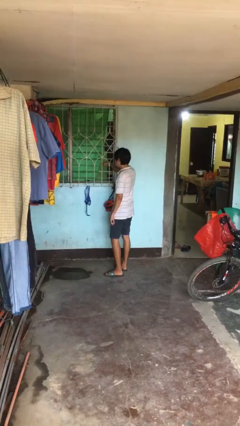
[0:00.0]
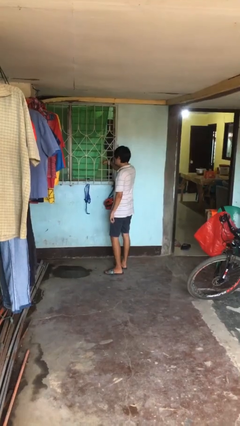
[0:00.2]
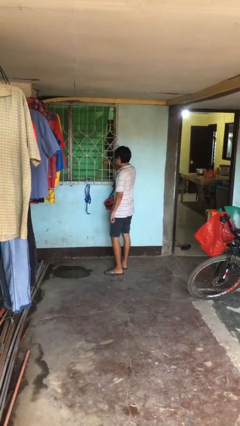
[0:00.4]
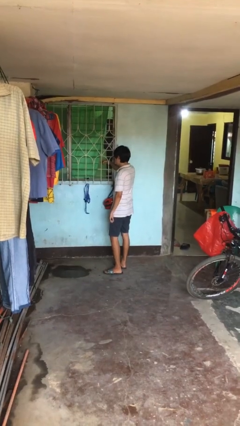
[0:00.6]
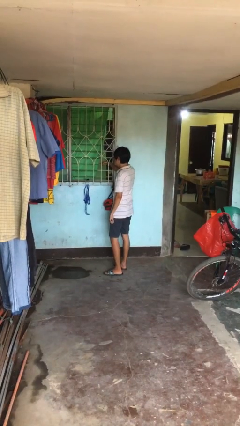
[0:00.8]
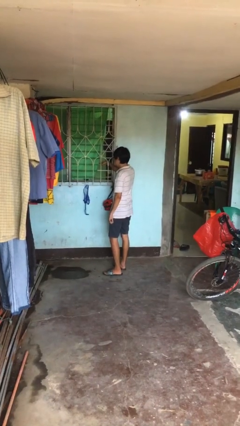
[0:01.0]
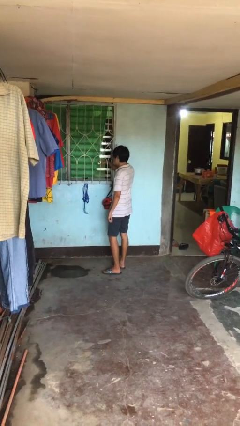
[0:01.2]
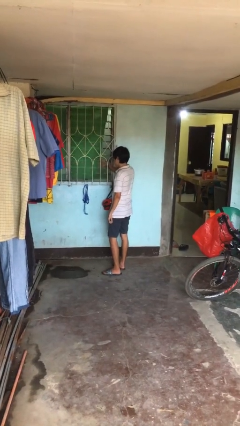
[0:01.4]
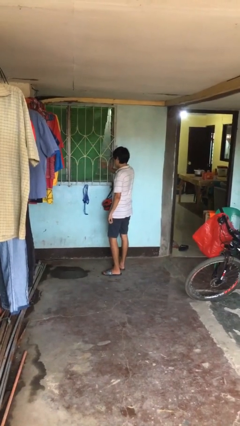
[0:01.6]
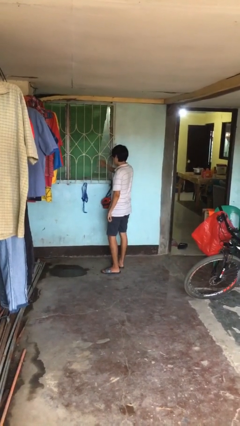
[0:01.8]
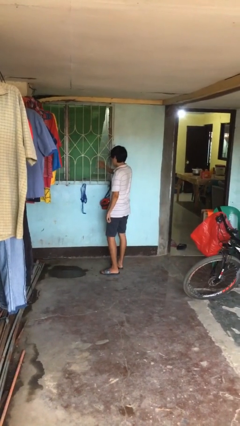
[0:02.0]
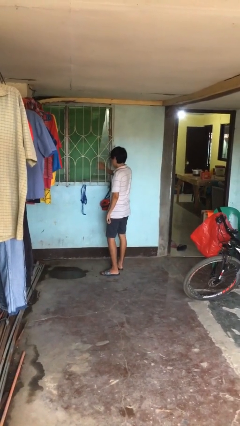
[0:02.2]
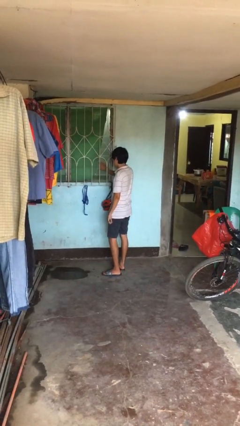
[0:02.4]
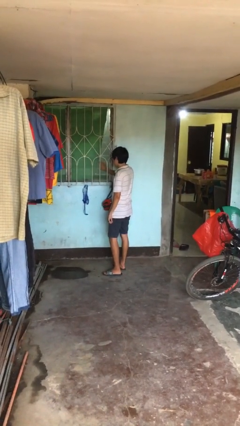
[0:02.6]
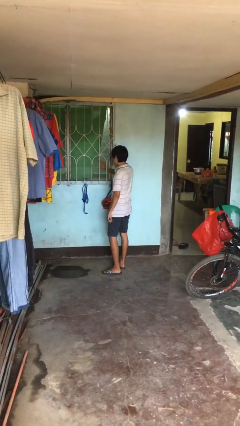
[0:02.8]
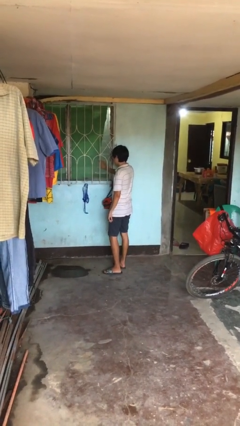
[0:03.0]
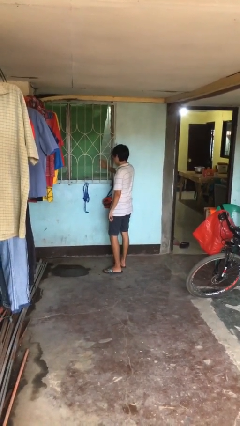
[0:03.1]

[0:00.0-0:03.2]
person closes home window

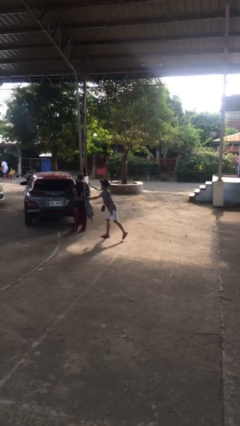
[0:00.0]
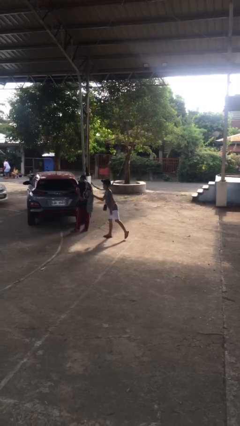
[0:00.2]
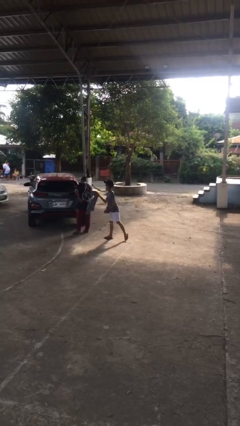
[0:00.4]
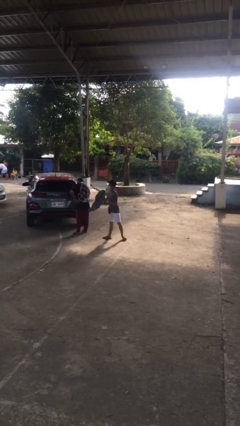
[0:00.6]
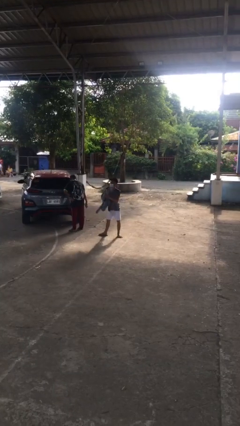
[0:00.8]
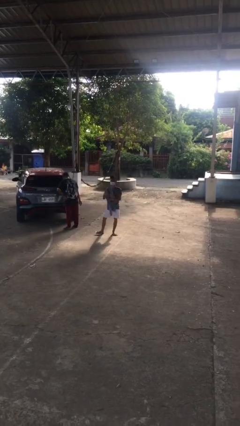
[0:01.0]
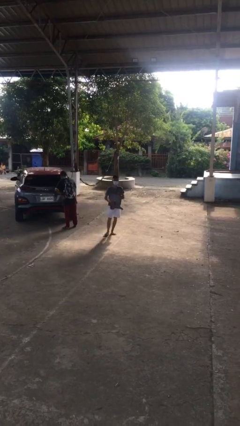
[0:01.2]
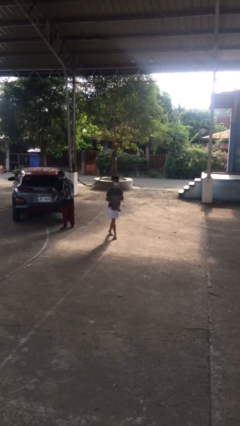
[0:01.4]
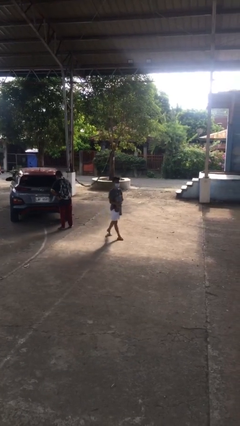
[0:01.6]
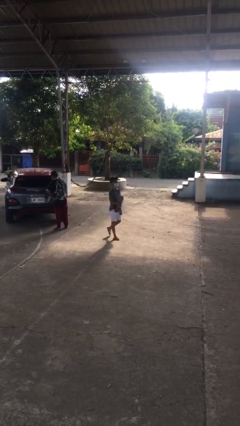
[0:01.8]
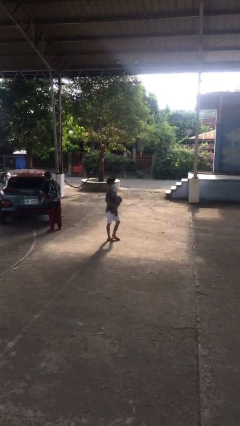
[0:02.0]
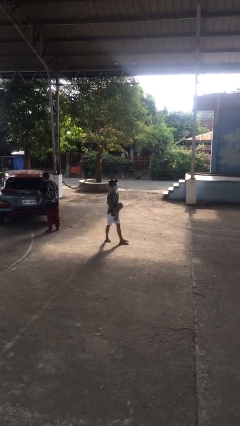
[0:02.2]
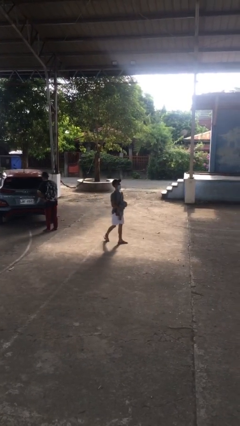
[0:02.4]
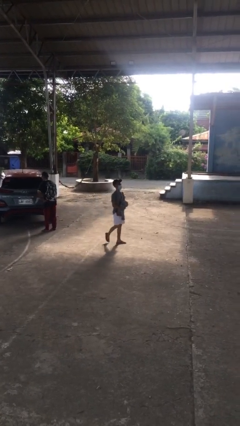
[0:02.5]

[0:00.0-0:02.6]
person steals object from person

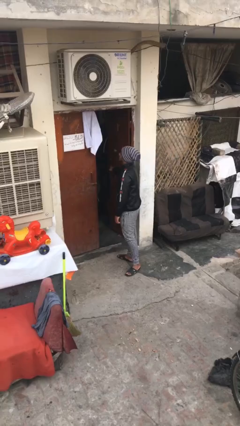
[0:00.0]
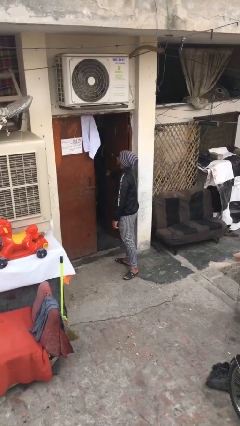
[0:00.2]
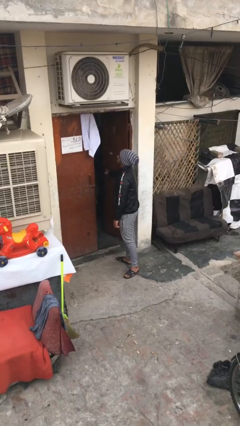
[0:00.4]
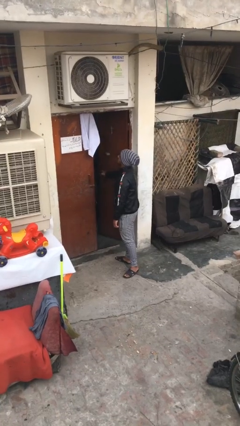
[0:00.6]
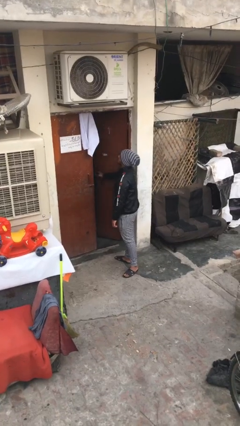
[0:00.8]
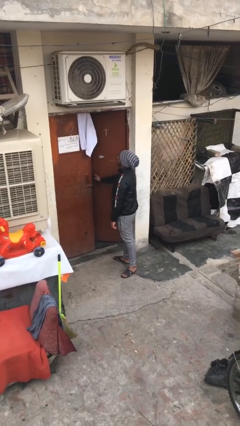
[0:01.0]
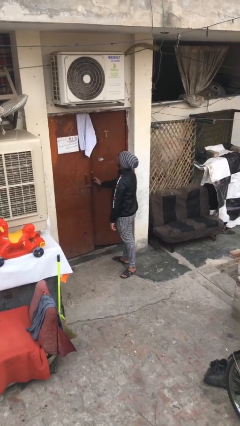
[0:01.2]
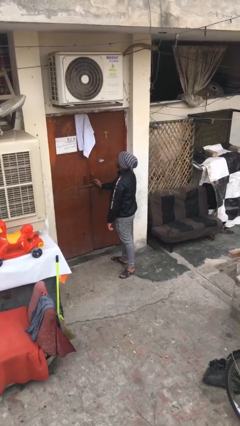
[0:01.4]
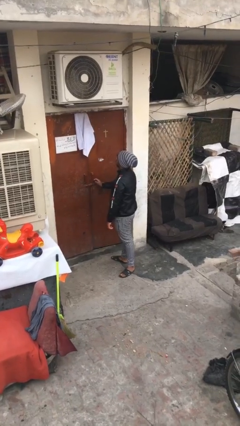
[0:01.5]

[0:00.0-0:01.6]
person closes facility door

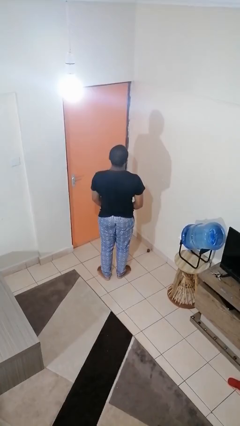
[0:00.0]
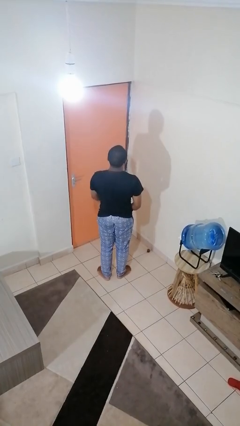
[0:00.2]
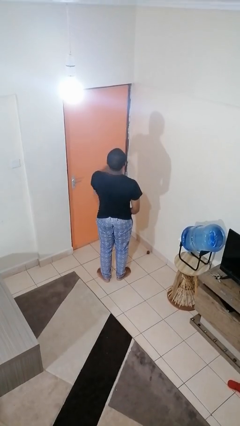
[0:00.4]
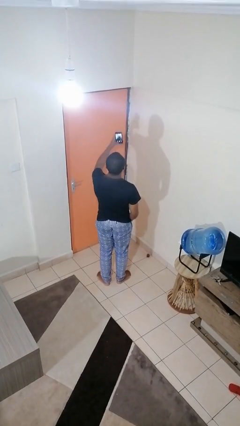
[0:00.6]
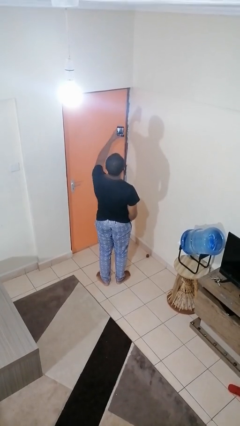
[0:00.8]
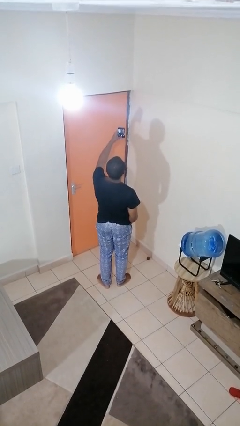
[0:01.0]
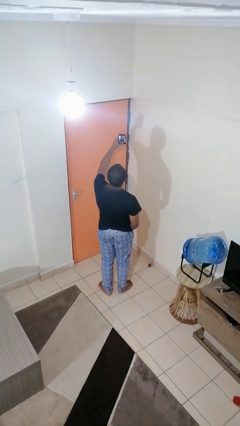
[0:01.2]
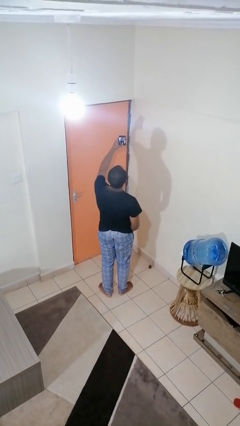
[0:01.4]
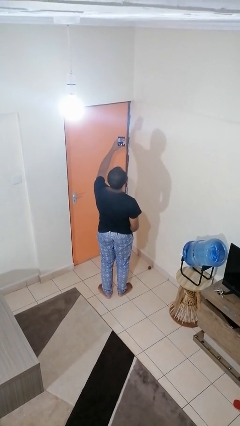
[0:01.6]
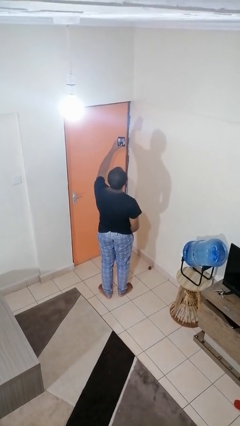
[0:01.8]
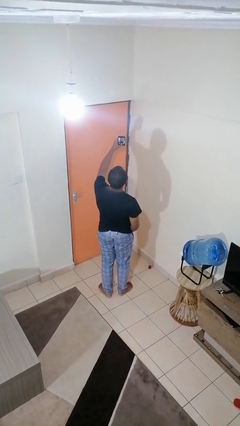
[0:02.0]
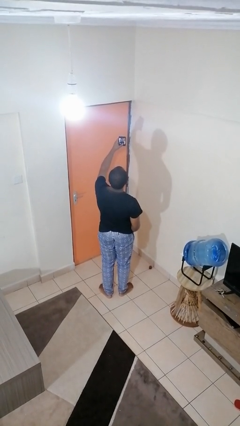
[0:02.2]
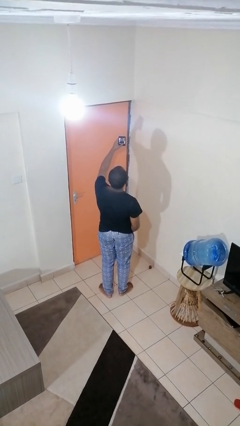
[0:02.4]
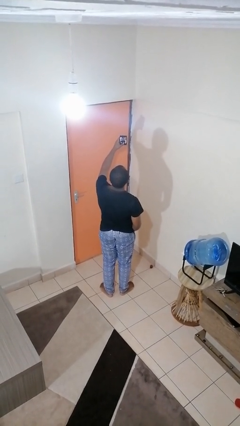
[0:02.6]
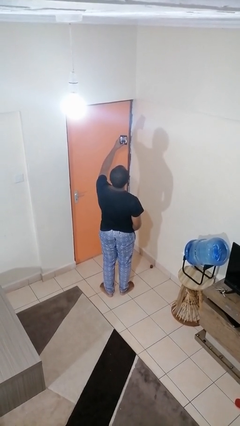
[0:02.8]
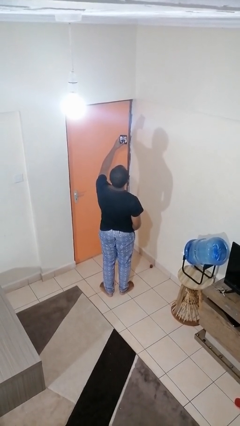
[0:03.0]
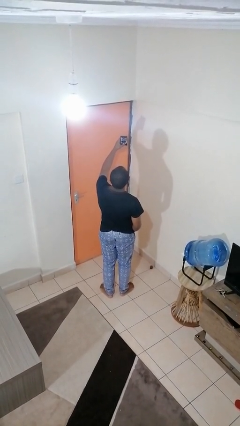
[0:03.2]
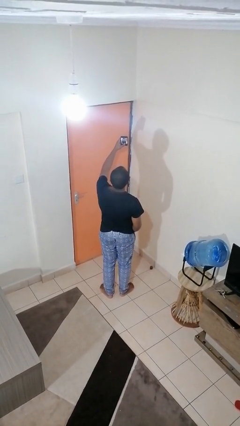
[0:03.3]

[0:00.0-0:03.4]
person takes selfie

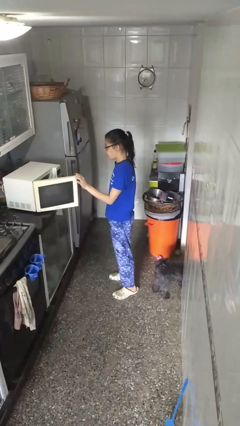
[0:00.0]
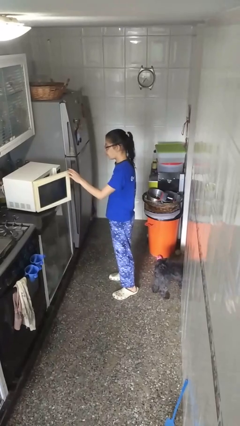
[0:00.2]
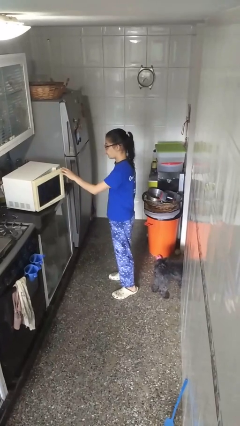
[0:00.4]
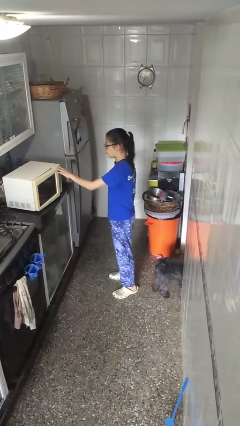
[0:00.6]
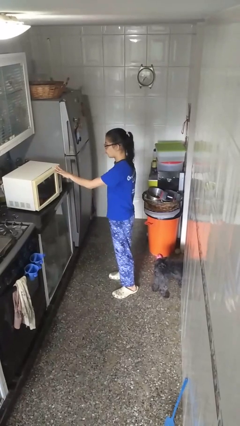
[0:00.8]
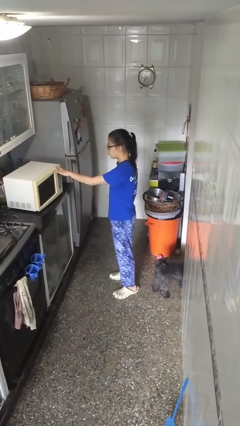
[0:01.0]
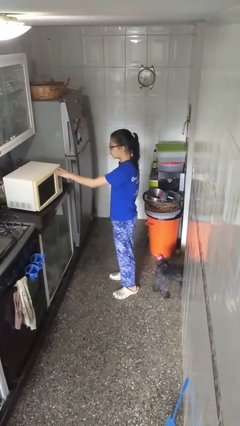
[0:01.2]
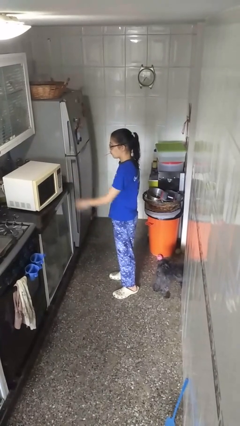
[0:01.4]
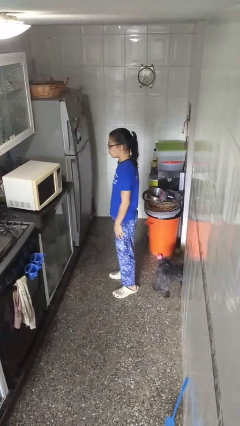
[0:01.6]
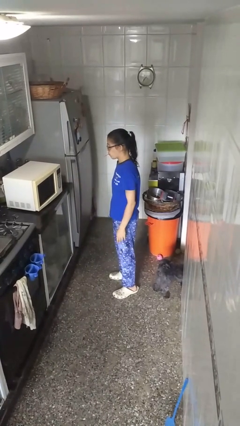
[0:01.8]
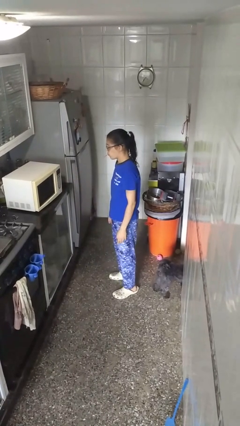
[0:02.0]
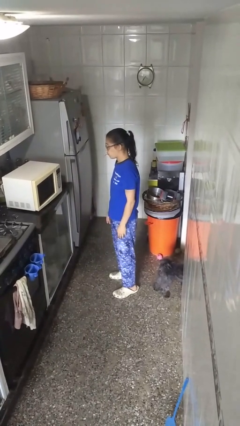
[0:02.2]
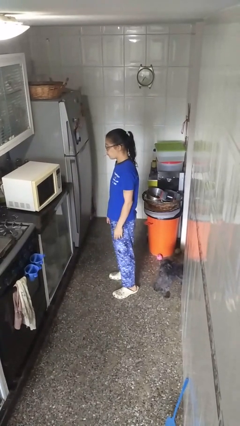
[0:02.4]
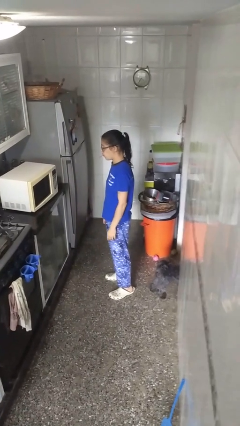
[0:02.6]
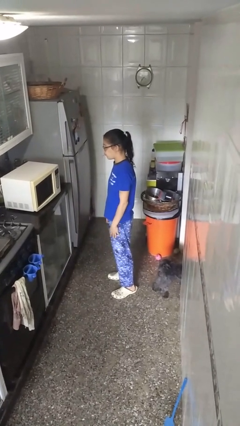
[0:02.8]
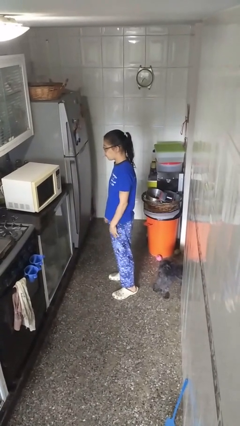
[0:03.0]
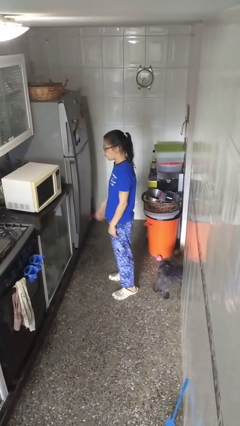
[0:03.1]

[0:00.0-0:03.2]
person closes microwave

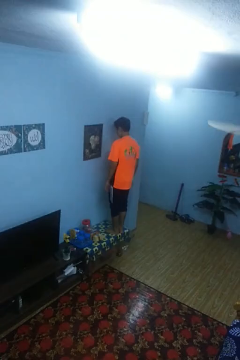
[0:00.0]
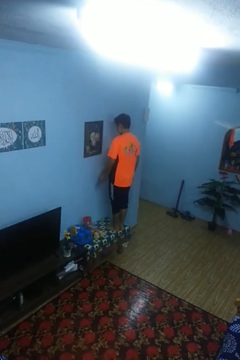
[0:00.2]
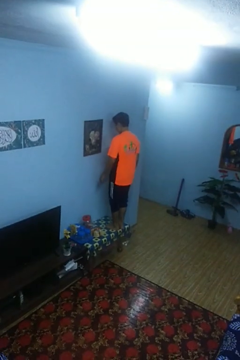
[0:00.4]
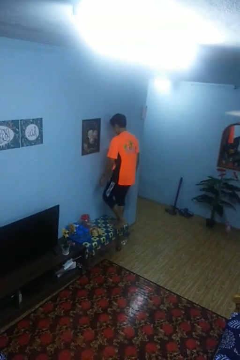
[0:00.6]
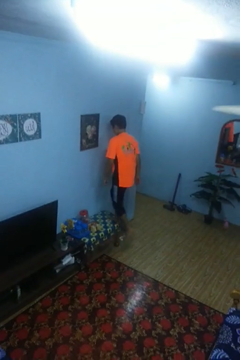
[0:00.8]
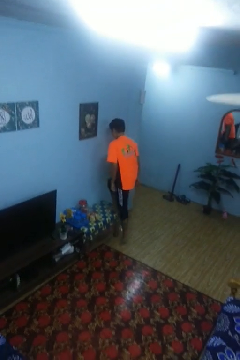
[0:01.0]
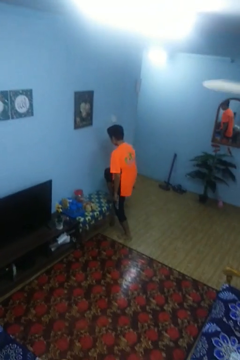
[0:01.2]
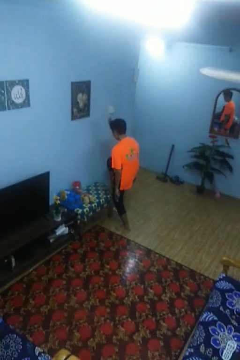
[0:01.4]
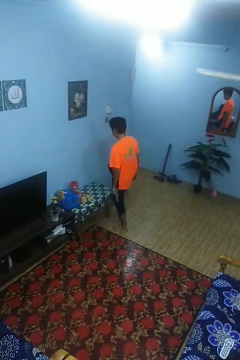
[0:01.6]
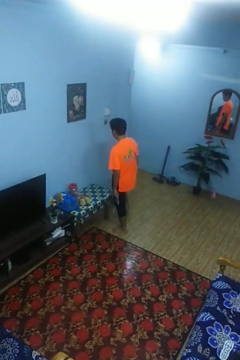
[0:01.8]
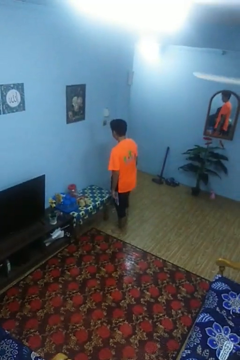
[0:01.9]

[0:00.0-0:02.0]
person climbs off table

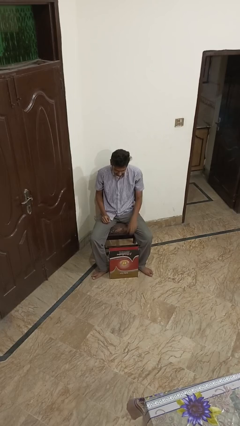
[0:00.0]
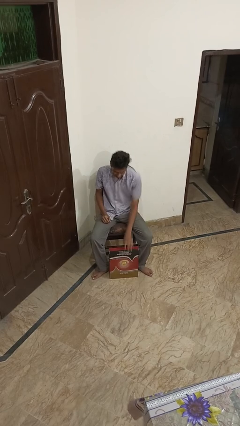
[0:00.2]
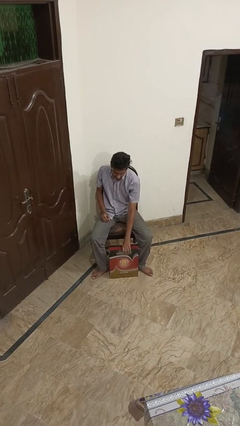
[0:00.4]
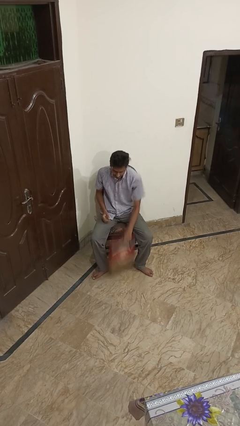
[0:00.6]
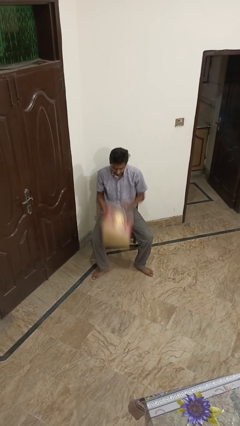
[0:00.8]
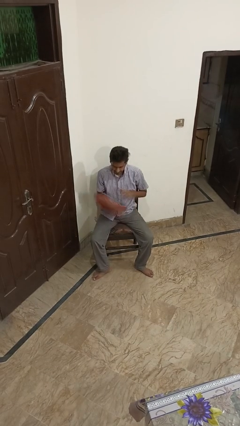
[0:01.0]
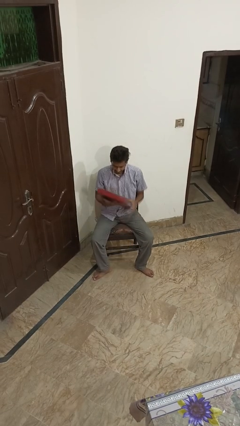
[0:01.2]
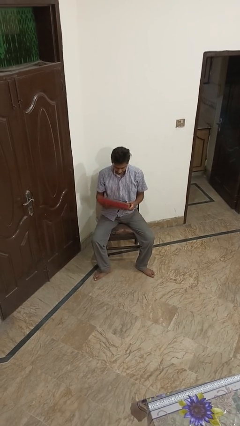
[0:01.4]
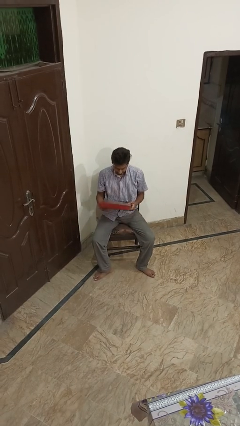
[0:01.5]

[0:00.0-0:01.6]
person picks up object from floor
